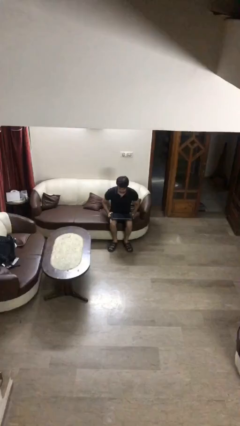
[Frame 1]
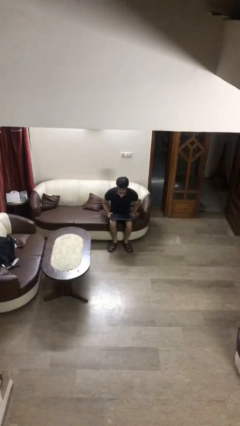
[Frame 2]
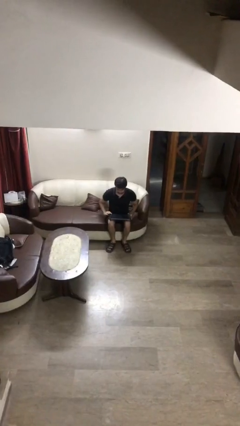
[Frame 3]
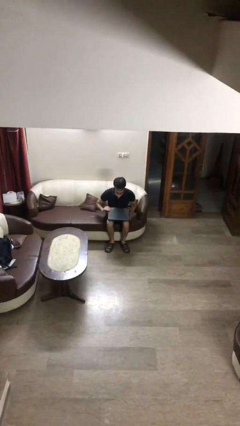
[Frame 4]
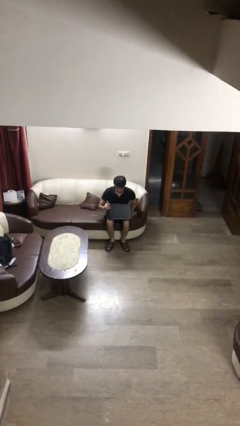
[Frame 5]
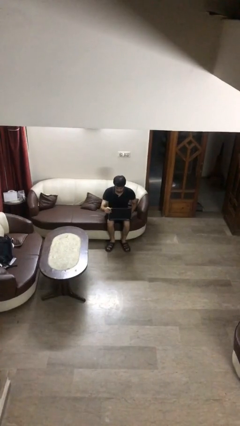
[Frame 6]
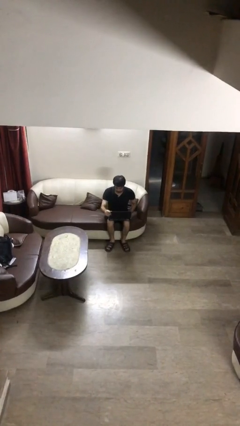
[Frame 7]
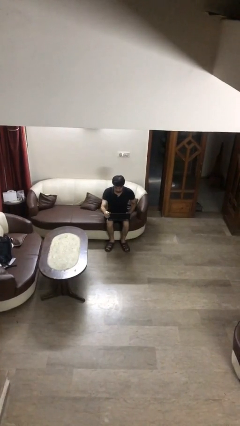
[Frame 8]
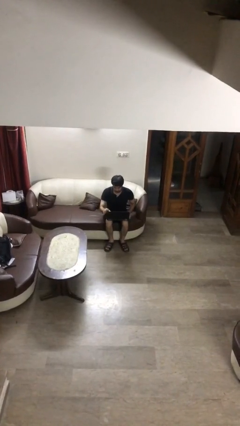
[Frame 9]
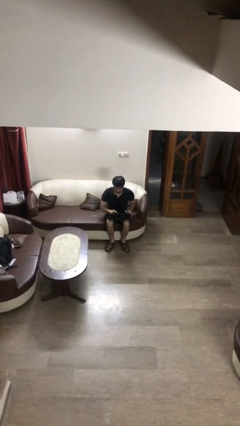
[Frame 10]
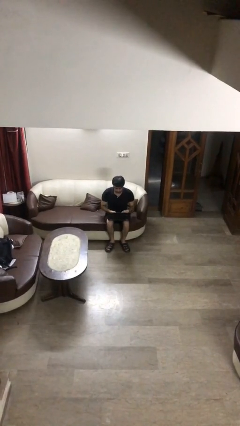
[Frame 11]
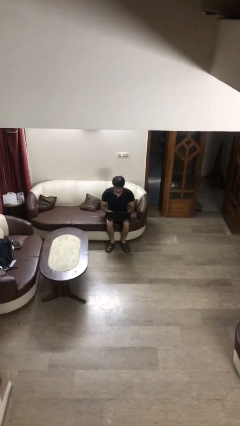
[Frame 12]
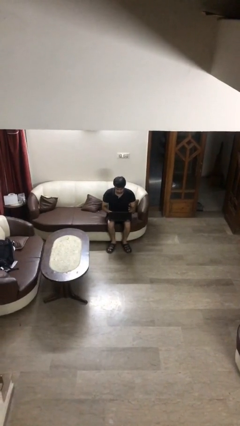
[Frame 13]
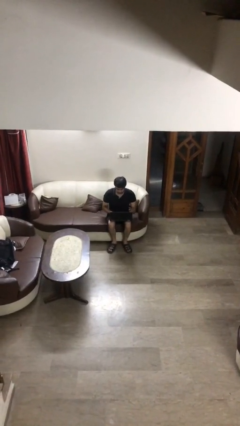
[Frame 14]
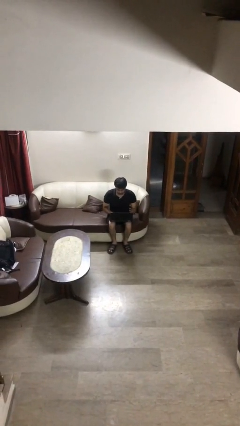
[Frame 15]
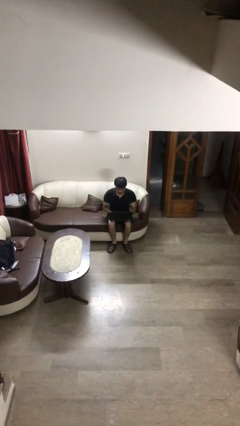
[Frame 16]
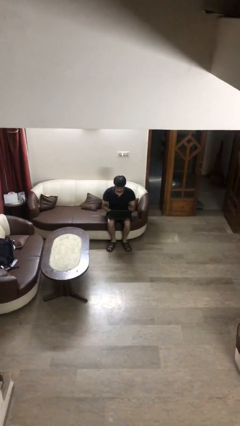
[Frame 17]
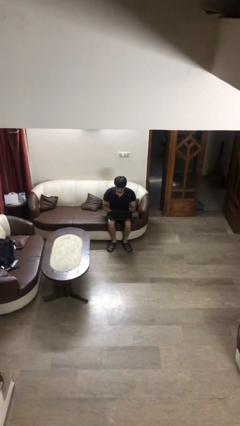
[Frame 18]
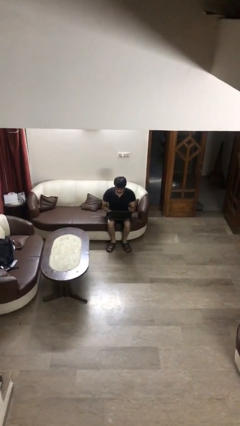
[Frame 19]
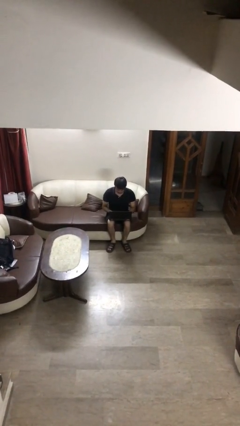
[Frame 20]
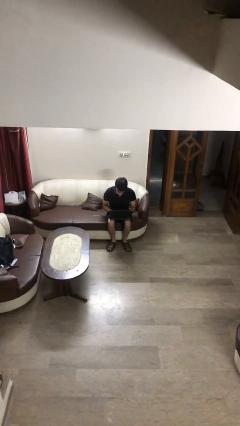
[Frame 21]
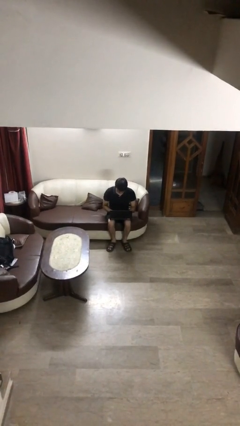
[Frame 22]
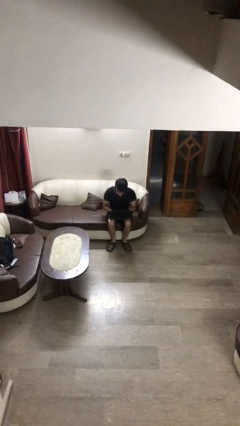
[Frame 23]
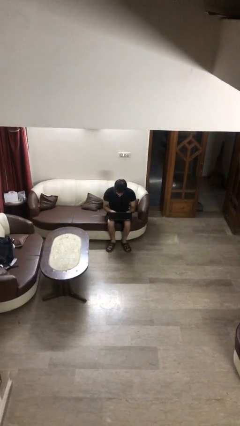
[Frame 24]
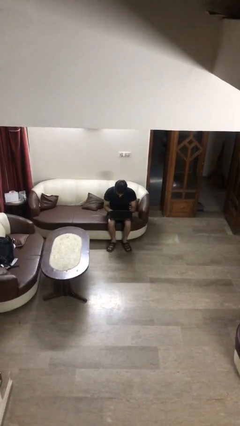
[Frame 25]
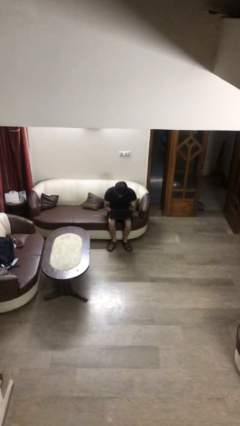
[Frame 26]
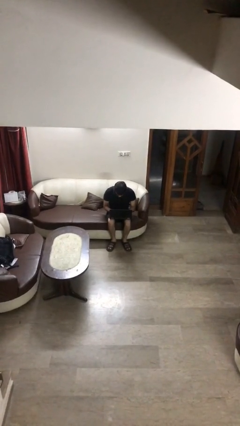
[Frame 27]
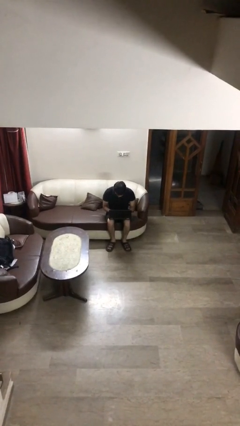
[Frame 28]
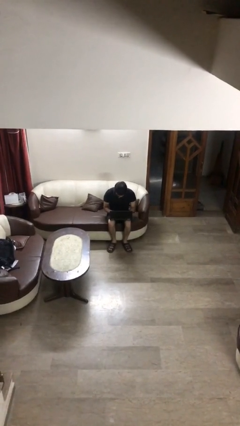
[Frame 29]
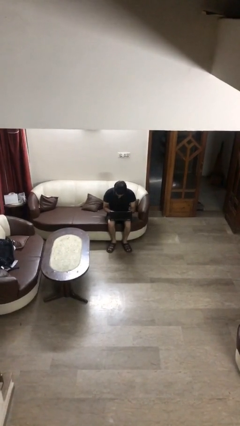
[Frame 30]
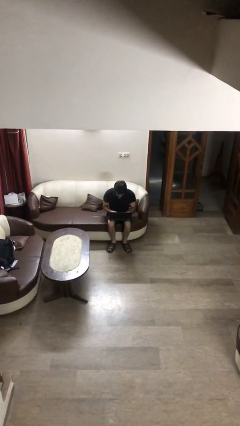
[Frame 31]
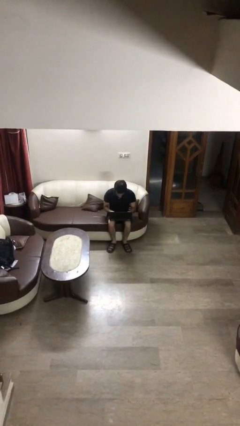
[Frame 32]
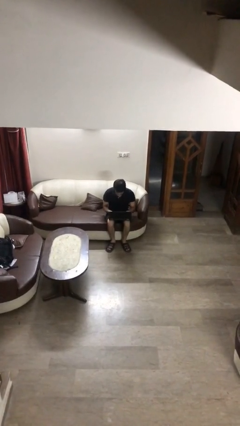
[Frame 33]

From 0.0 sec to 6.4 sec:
person interacts with laptop

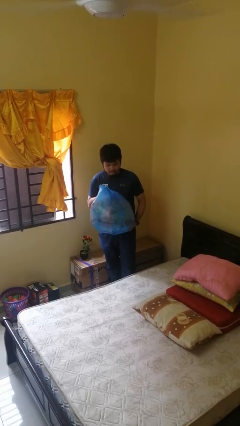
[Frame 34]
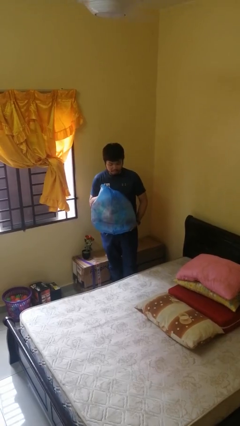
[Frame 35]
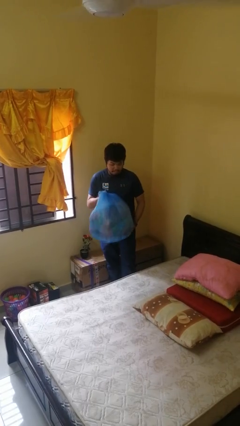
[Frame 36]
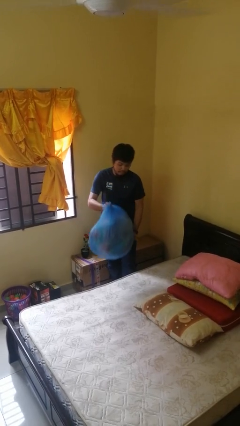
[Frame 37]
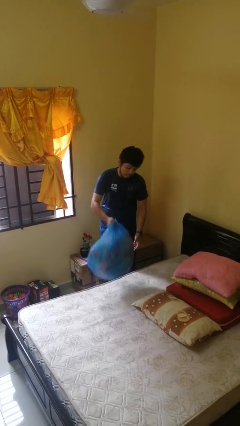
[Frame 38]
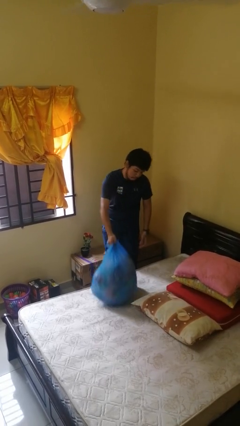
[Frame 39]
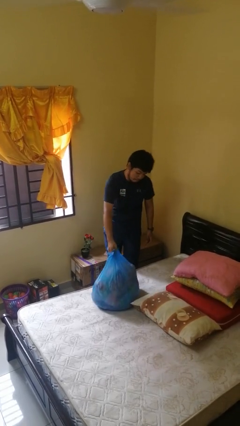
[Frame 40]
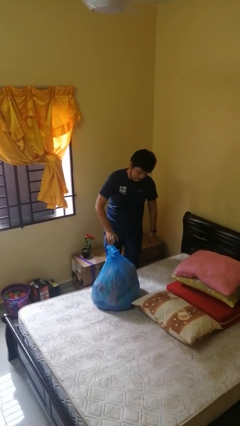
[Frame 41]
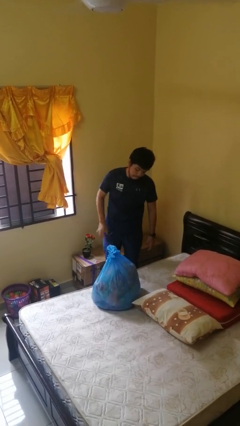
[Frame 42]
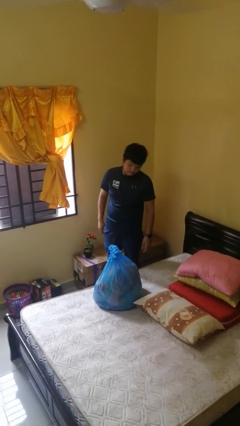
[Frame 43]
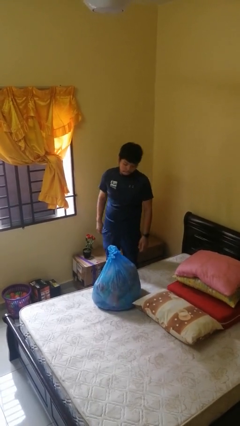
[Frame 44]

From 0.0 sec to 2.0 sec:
person puts down object on bed

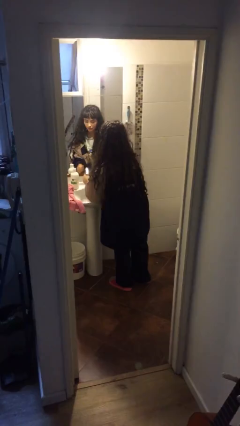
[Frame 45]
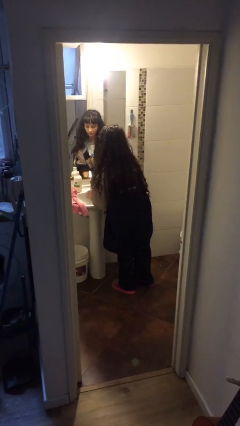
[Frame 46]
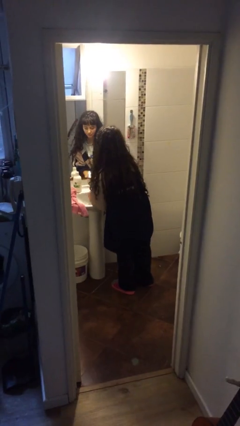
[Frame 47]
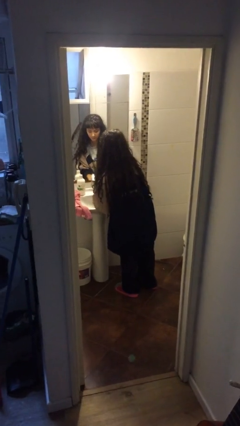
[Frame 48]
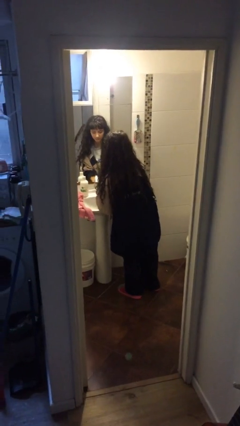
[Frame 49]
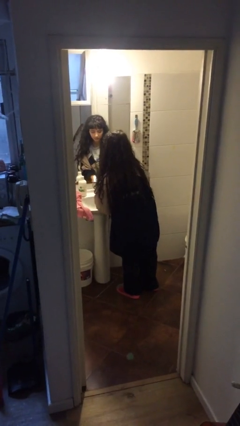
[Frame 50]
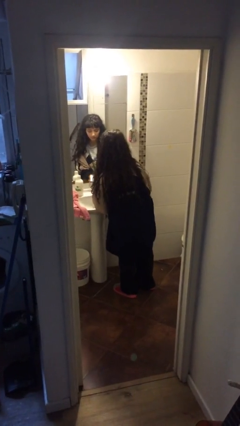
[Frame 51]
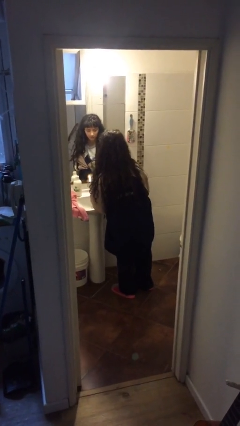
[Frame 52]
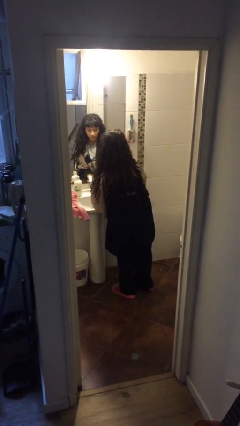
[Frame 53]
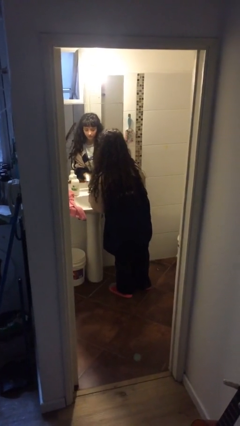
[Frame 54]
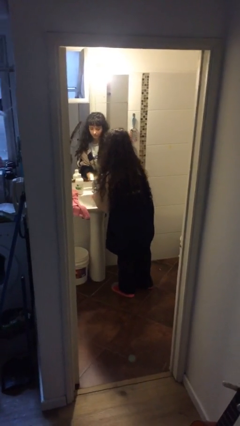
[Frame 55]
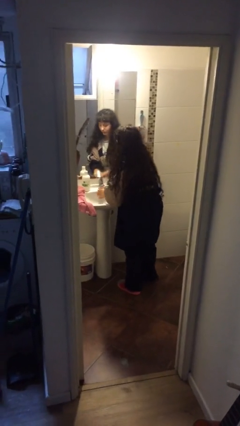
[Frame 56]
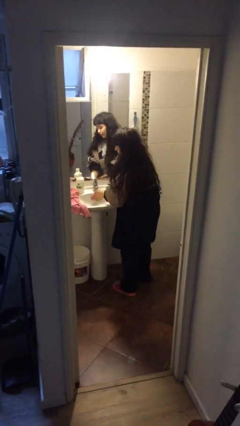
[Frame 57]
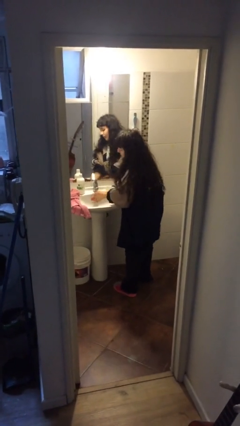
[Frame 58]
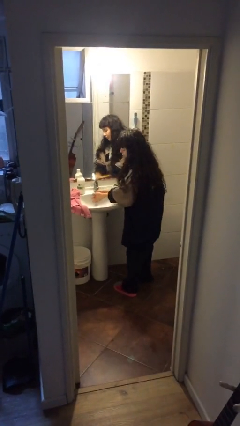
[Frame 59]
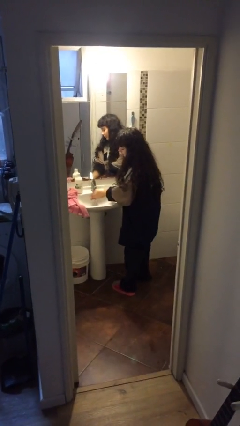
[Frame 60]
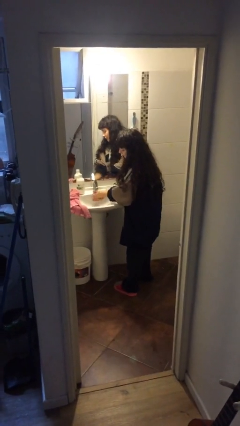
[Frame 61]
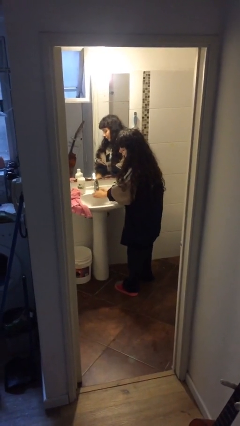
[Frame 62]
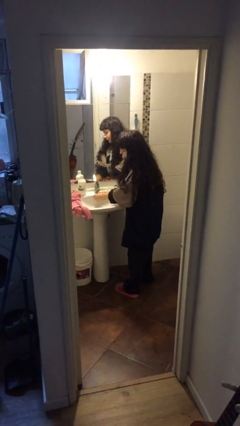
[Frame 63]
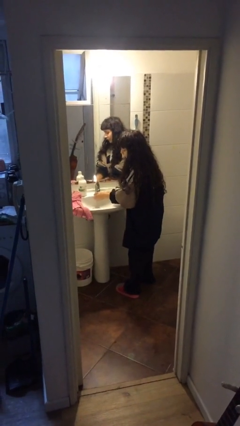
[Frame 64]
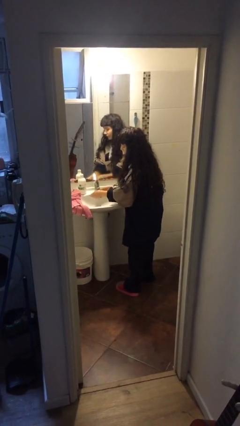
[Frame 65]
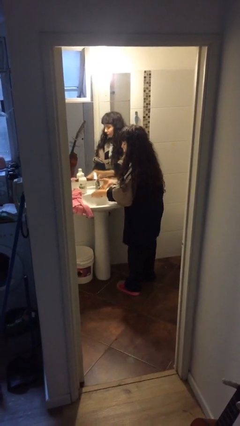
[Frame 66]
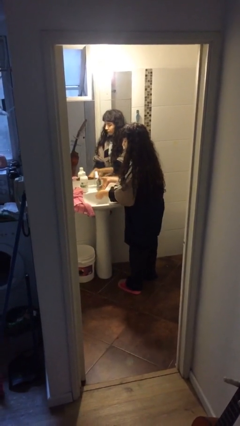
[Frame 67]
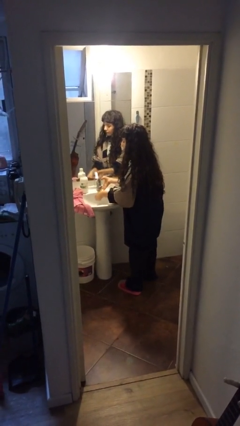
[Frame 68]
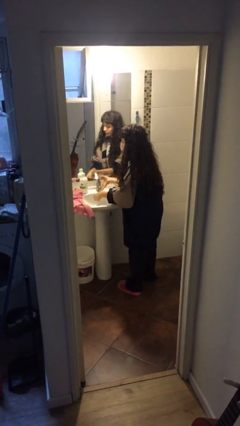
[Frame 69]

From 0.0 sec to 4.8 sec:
person washes hands

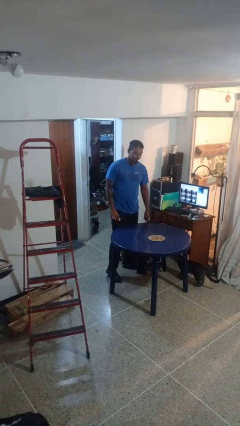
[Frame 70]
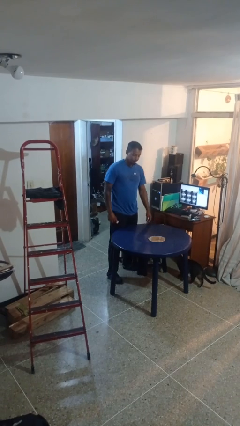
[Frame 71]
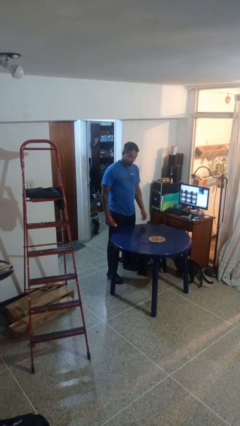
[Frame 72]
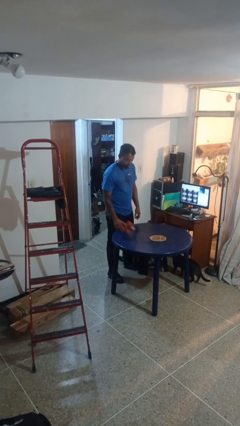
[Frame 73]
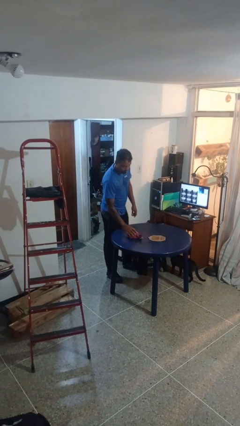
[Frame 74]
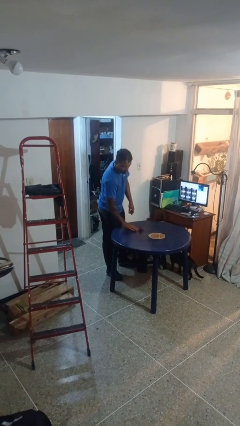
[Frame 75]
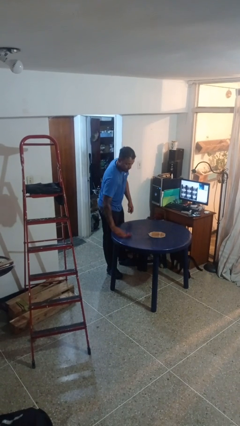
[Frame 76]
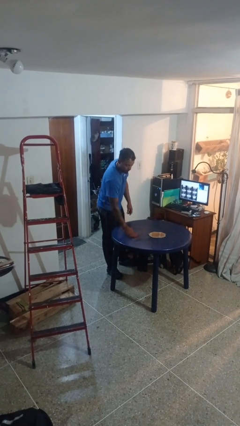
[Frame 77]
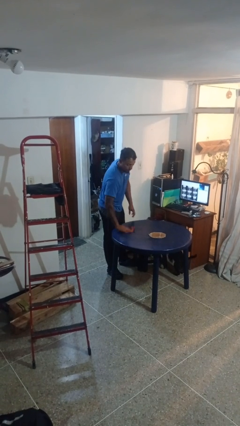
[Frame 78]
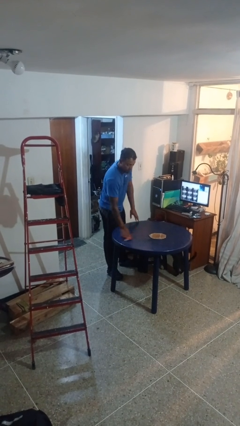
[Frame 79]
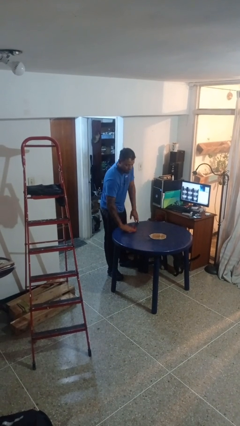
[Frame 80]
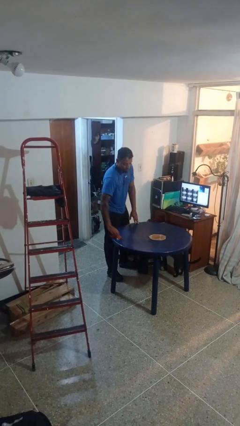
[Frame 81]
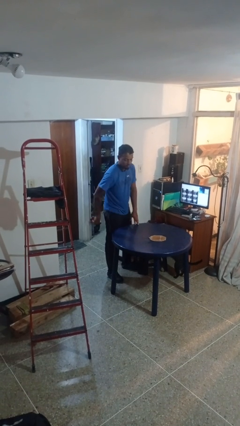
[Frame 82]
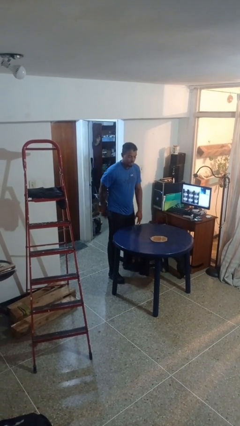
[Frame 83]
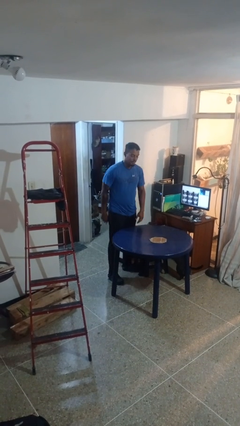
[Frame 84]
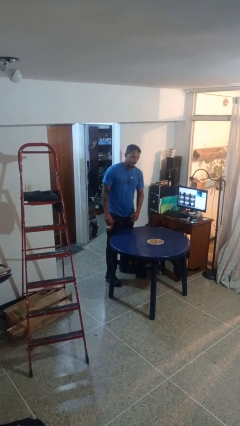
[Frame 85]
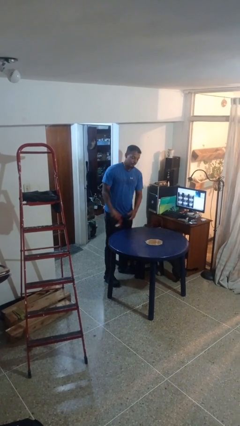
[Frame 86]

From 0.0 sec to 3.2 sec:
person cleans table with rag

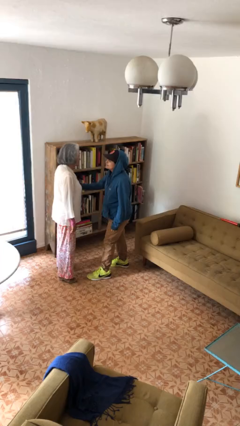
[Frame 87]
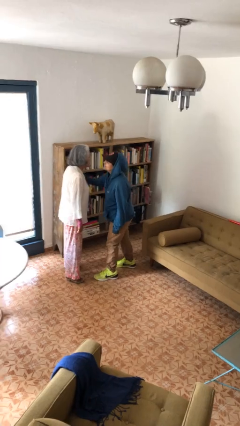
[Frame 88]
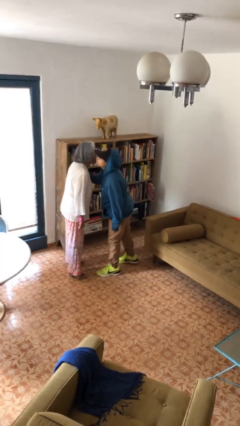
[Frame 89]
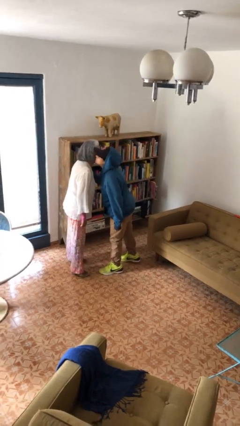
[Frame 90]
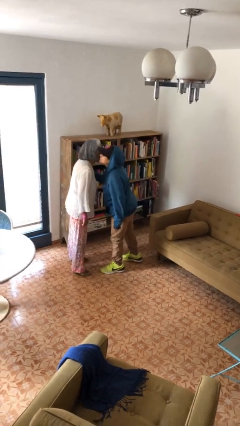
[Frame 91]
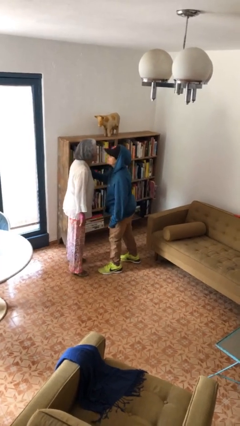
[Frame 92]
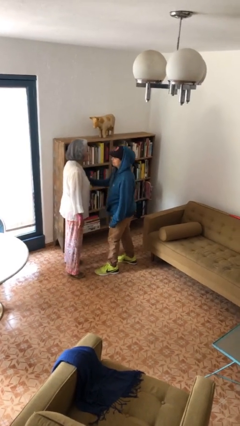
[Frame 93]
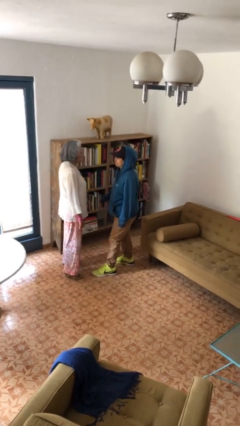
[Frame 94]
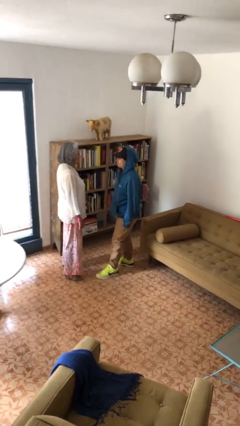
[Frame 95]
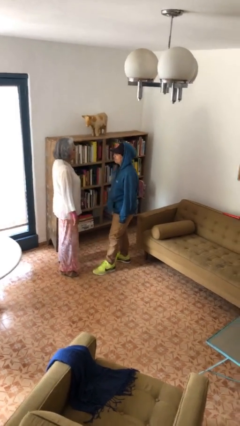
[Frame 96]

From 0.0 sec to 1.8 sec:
person kisses cheek of person
